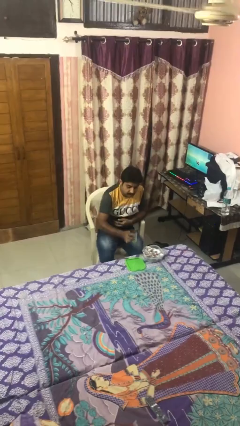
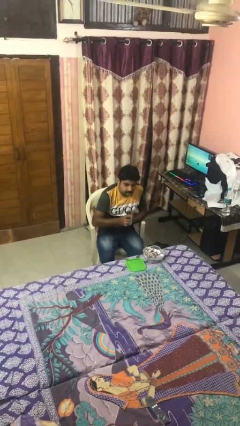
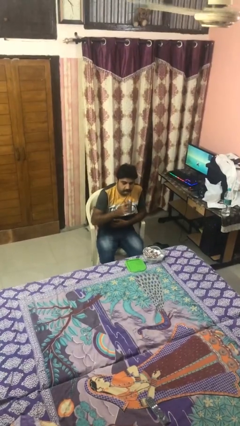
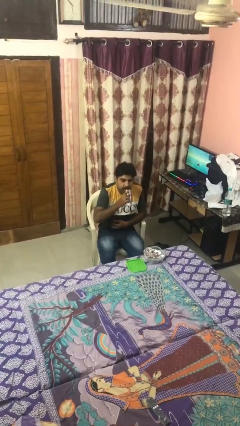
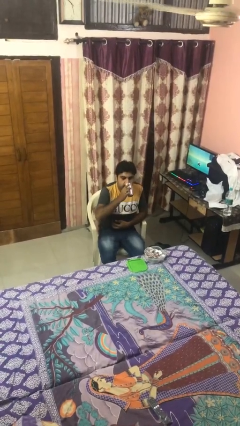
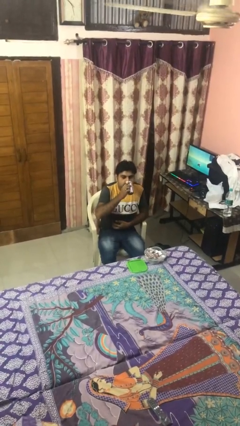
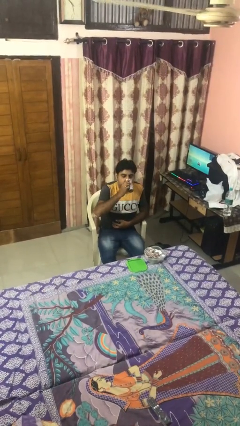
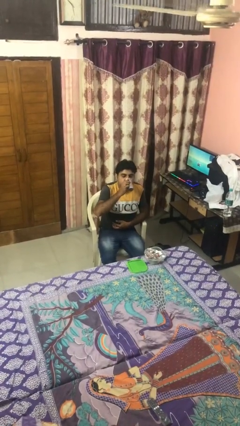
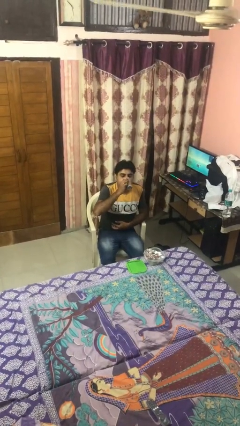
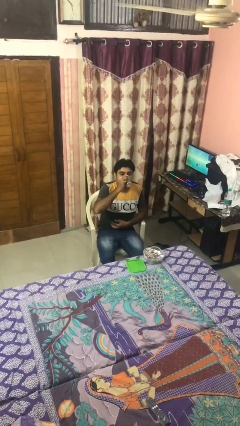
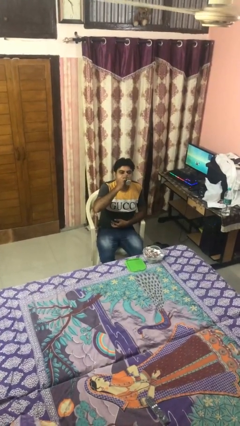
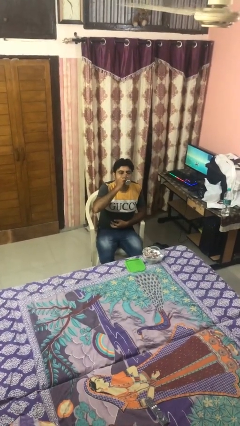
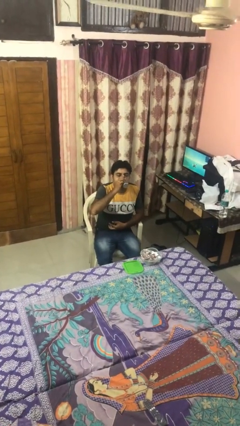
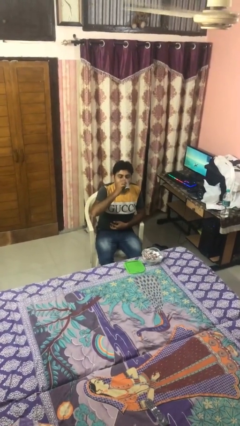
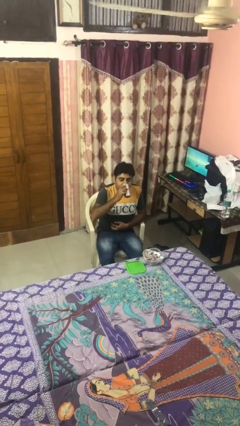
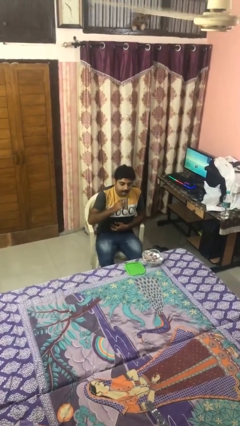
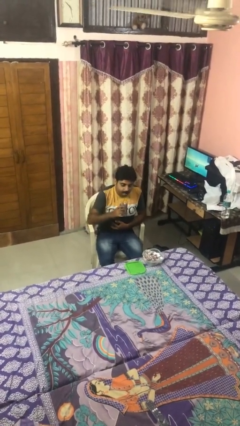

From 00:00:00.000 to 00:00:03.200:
person drinks from cup

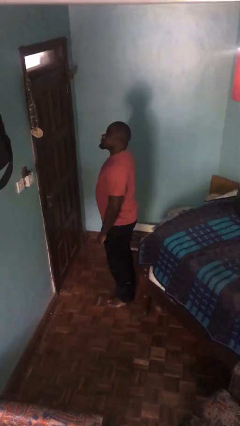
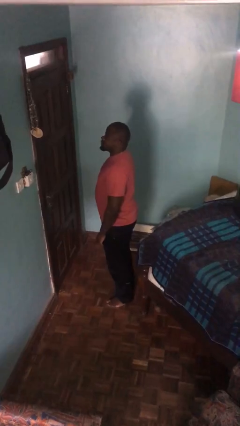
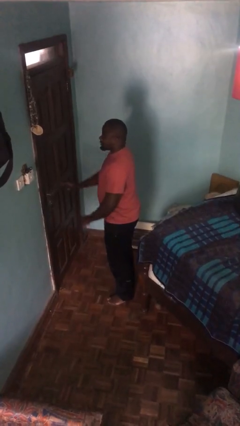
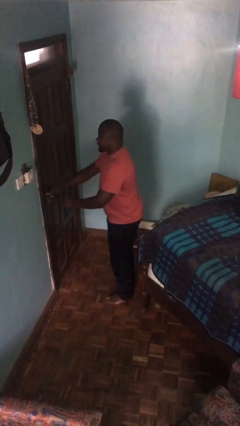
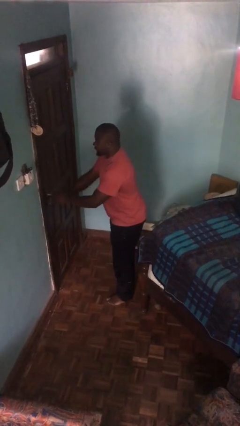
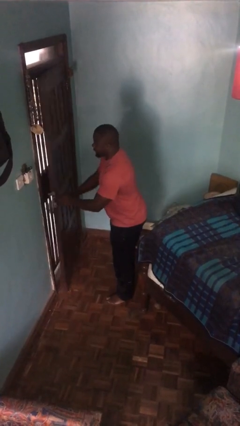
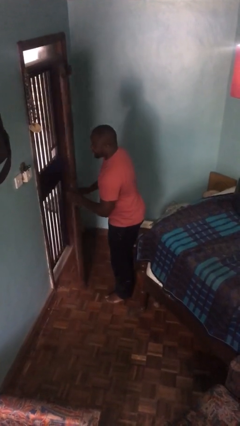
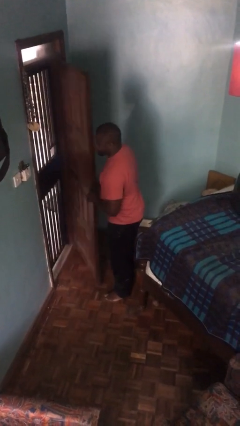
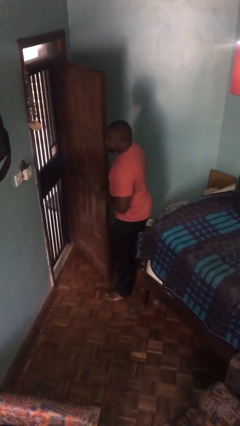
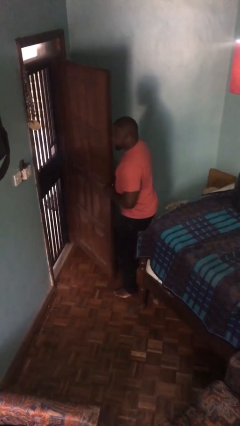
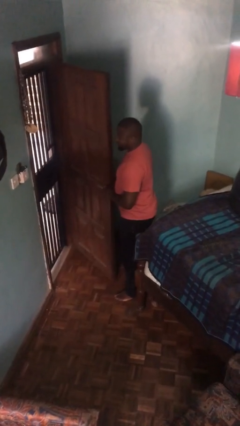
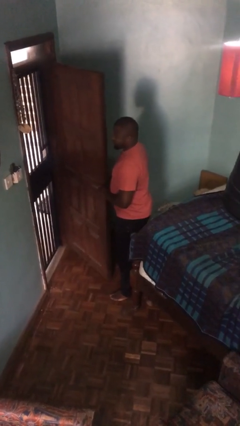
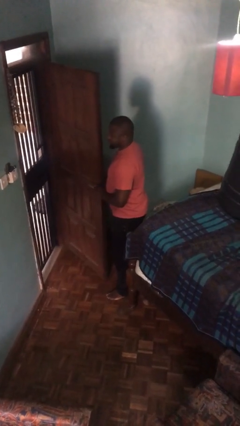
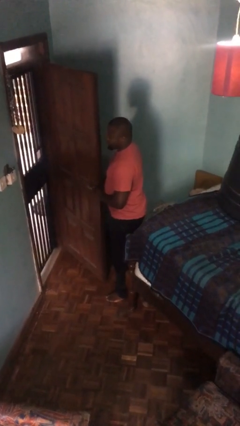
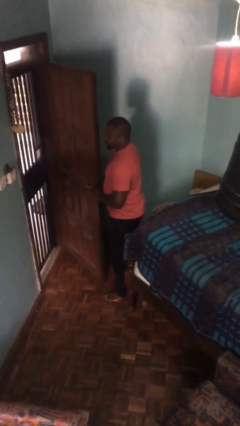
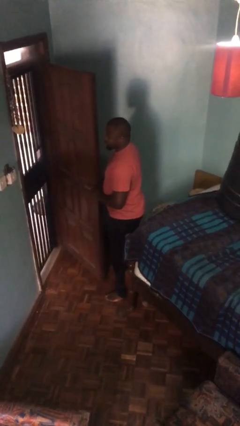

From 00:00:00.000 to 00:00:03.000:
person opens facility door

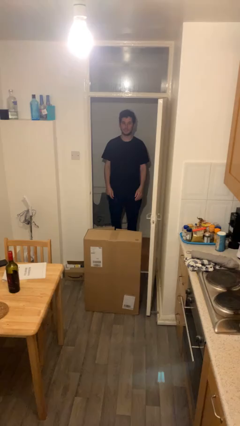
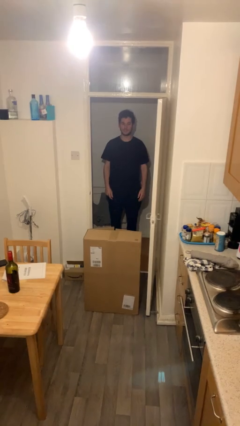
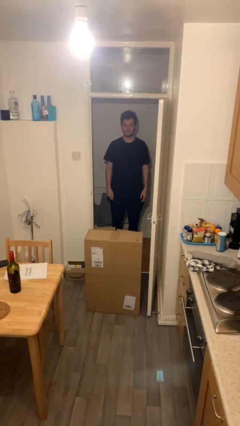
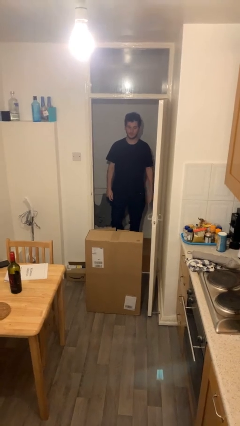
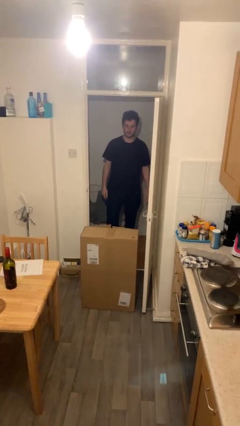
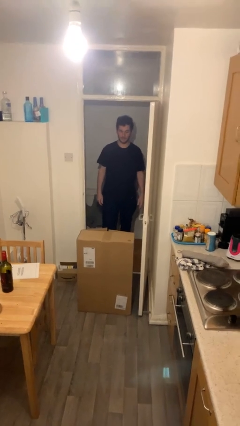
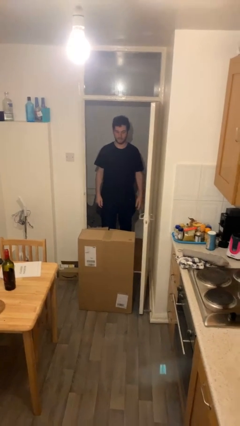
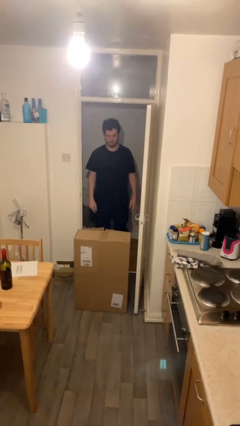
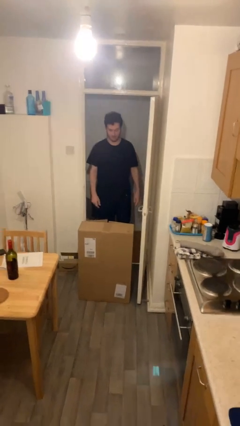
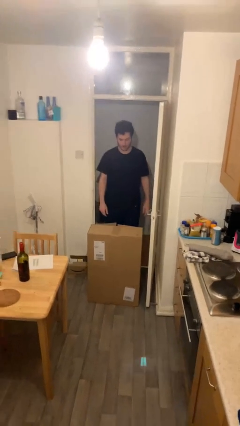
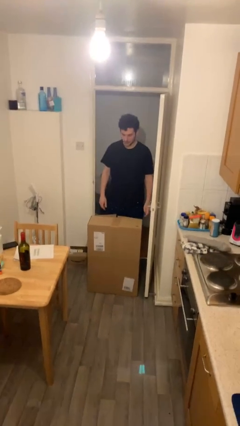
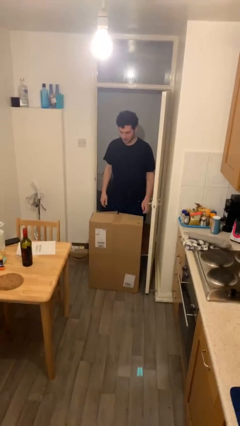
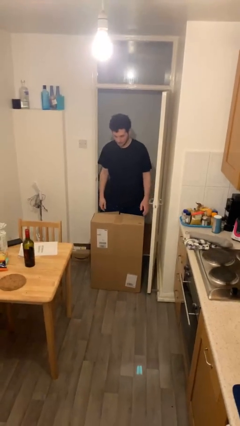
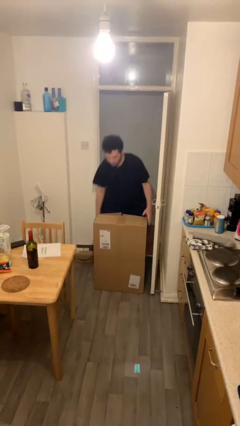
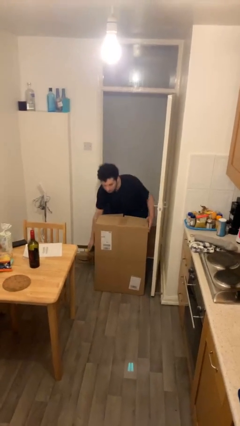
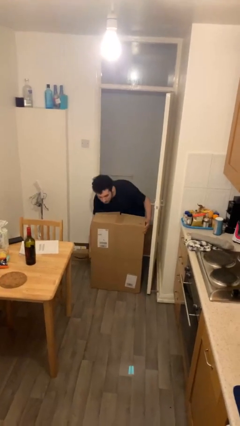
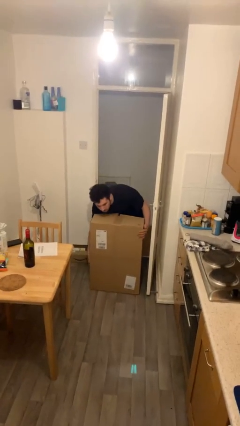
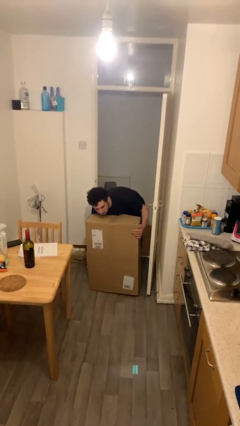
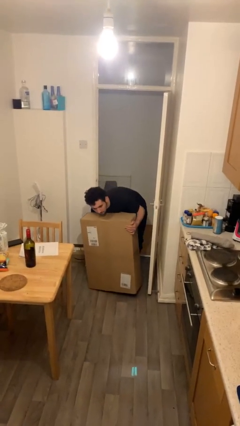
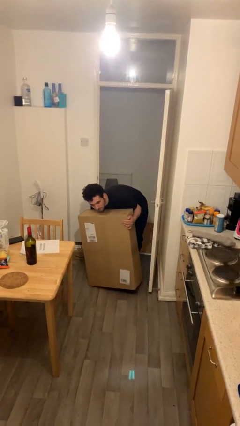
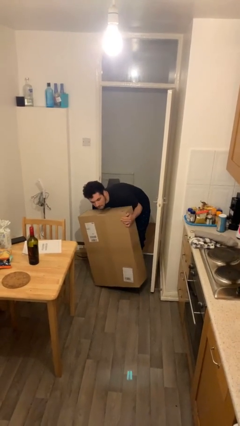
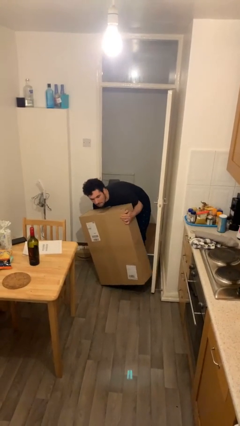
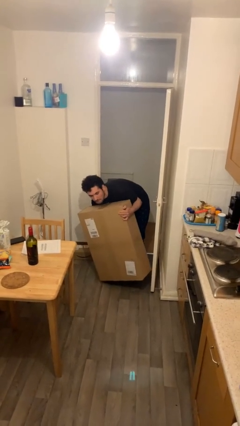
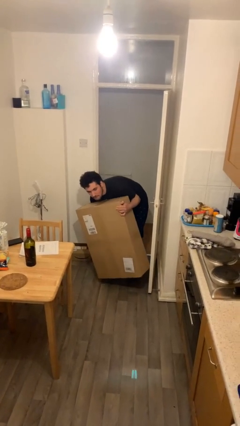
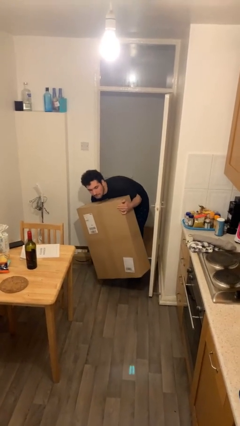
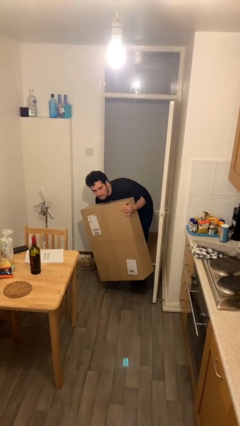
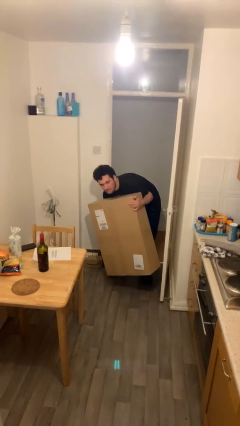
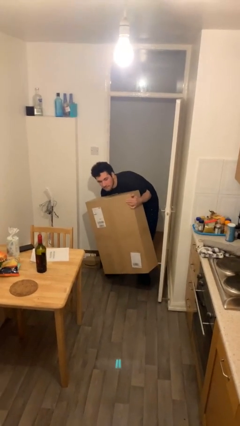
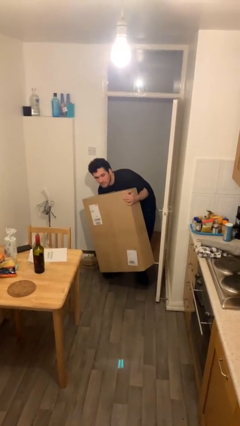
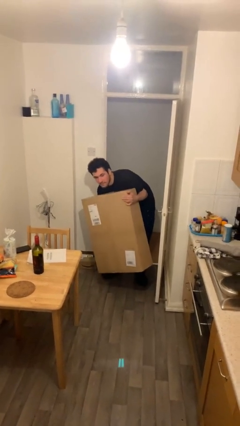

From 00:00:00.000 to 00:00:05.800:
person picks up object from floor

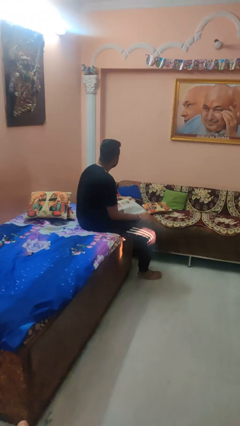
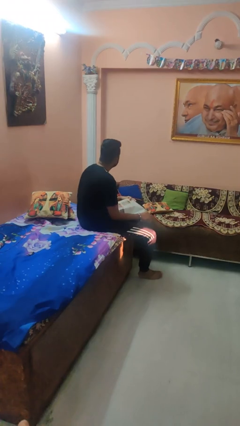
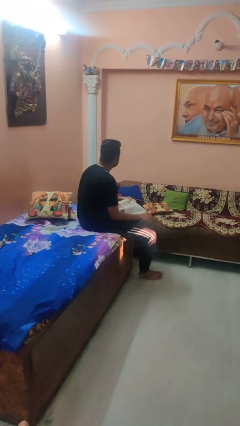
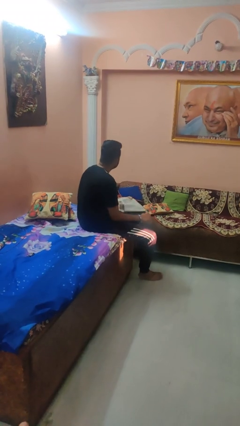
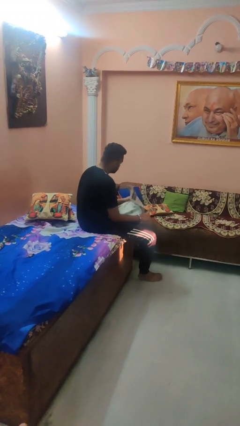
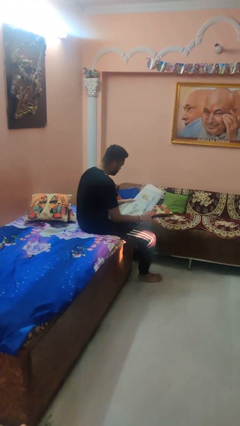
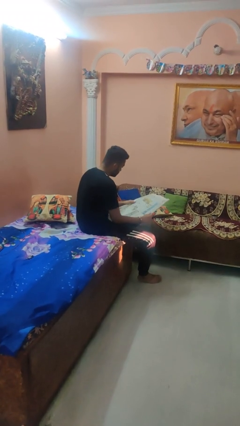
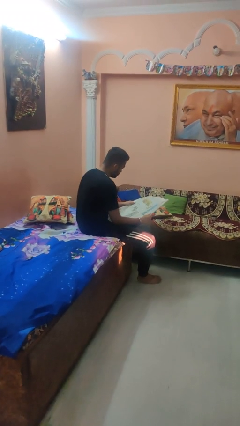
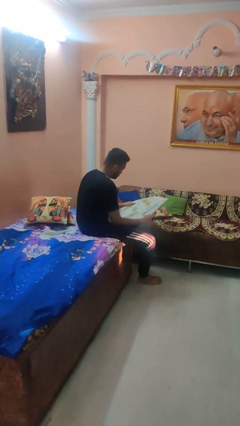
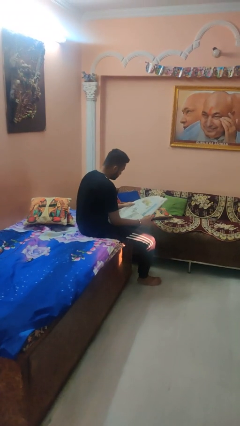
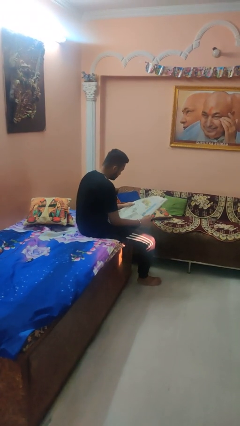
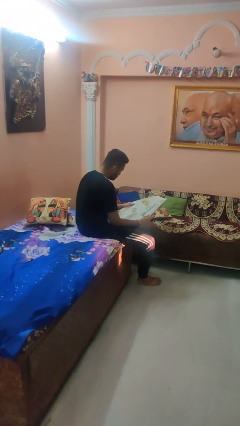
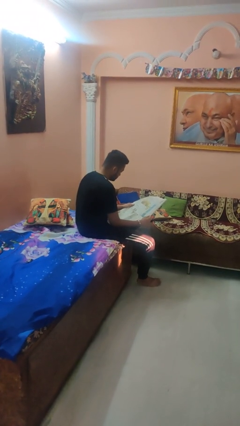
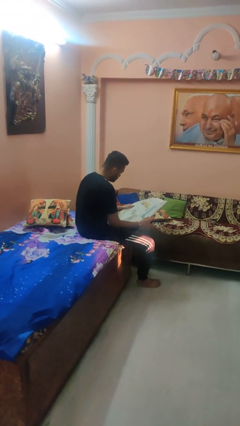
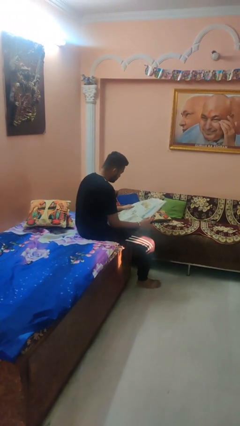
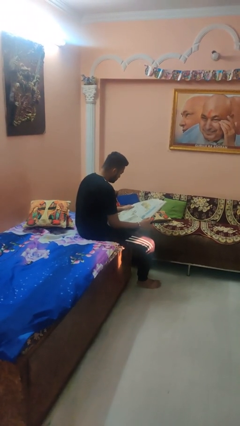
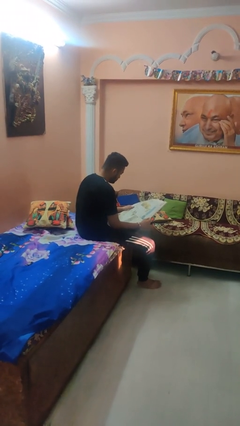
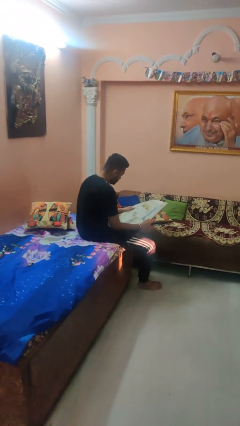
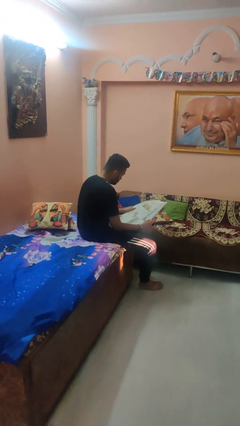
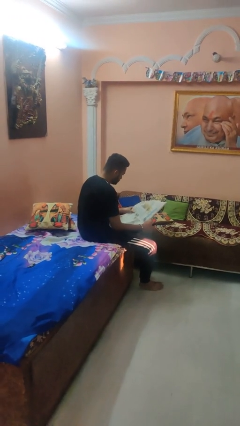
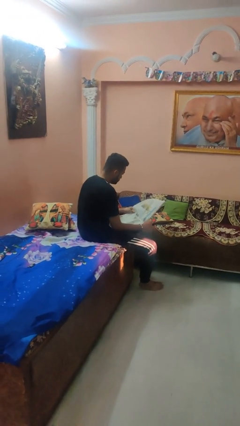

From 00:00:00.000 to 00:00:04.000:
person reads newspaper

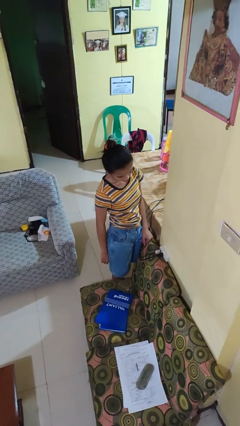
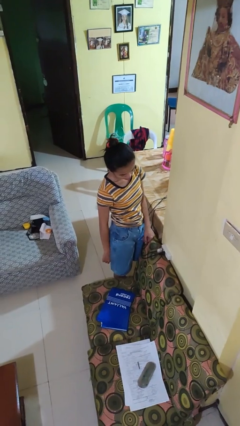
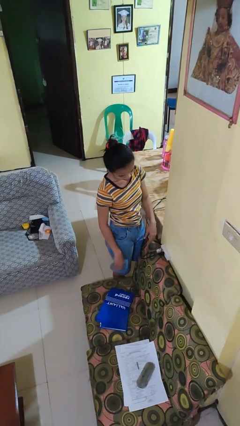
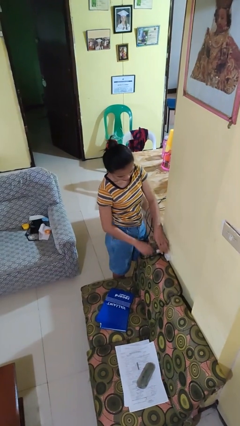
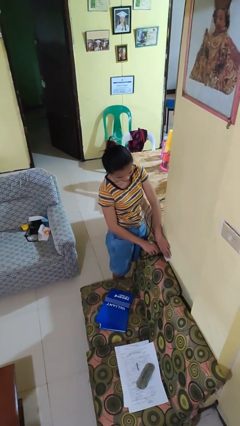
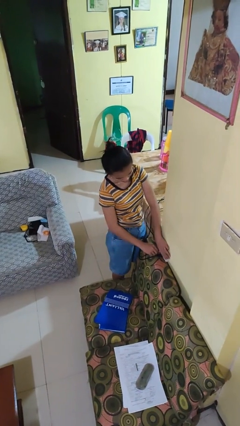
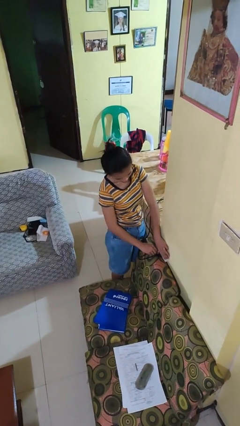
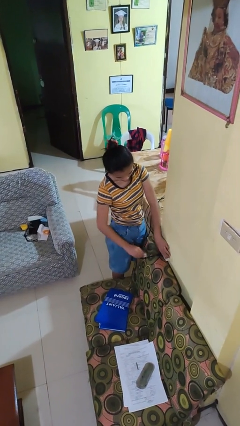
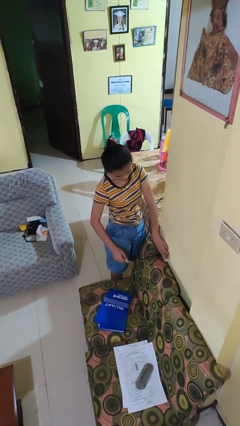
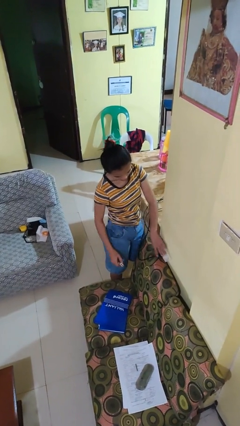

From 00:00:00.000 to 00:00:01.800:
person unplugs from electrical socket
